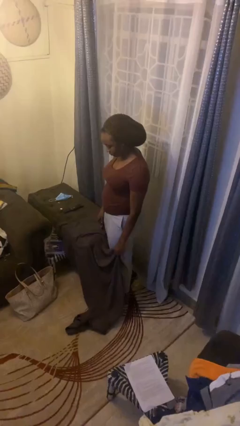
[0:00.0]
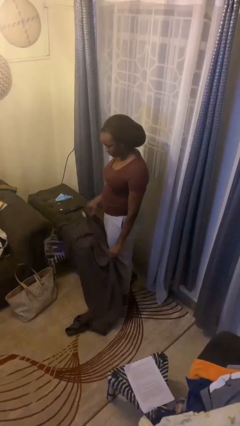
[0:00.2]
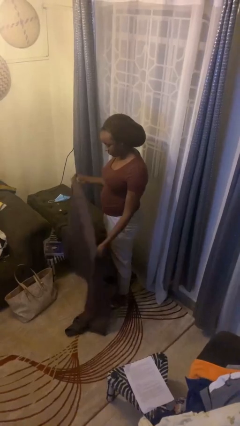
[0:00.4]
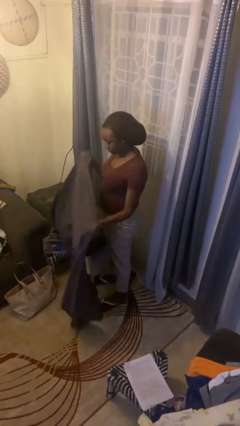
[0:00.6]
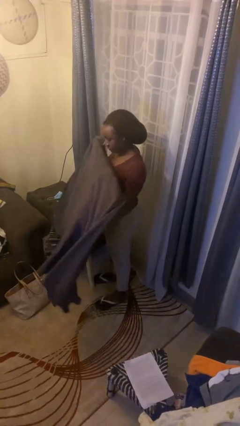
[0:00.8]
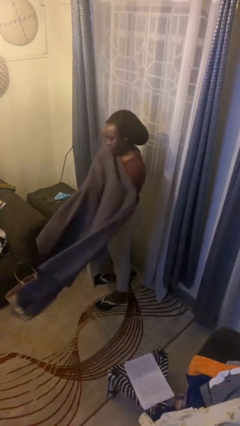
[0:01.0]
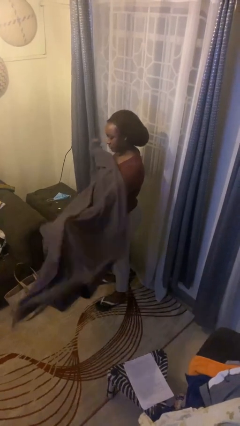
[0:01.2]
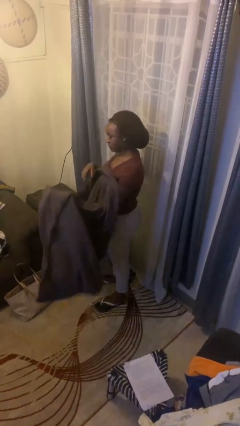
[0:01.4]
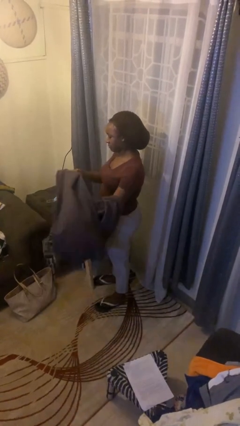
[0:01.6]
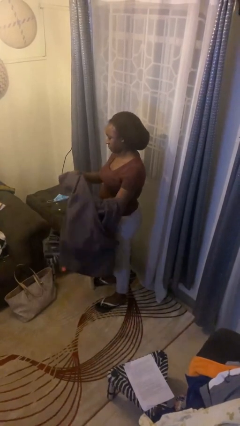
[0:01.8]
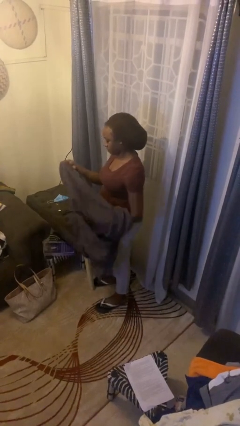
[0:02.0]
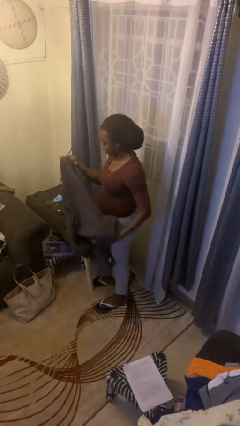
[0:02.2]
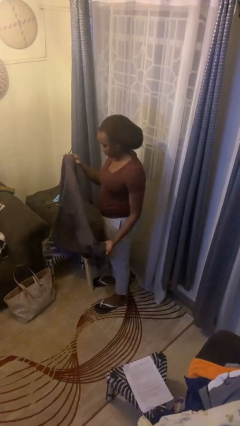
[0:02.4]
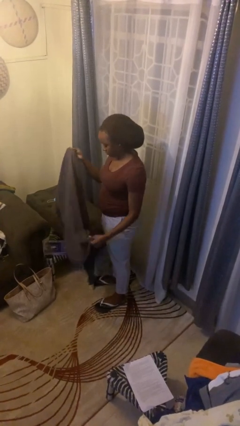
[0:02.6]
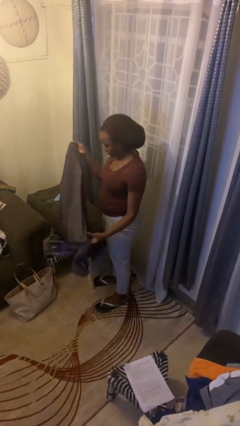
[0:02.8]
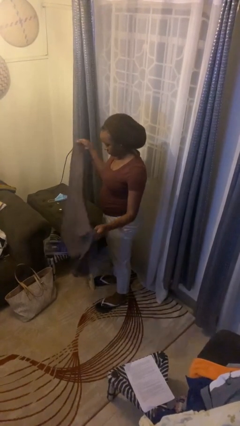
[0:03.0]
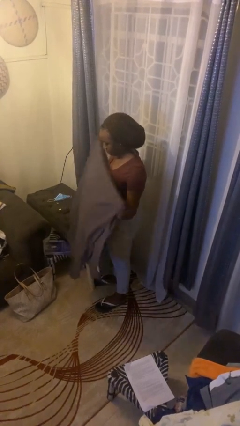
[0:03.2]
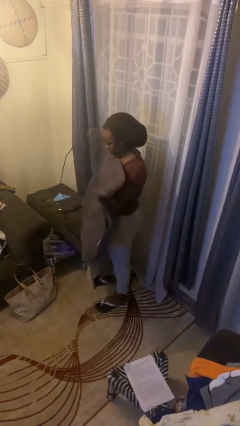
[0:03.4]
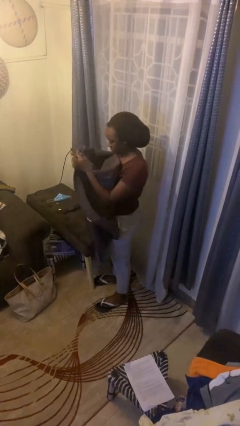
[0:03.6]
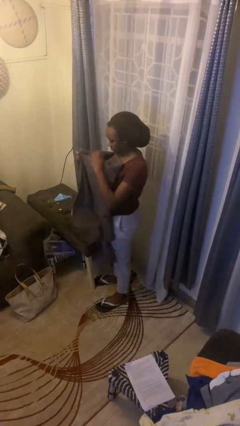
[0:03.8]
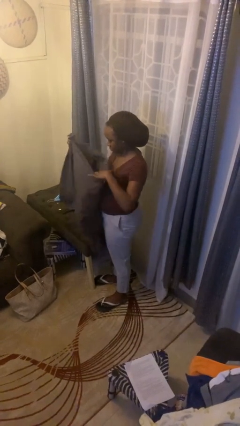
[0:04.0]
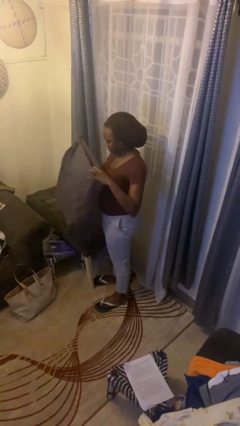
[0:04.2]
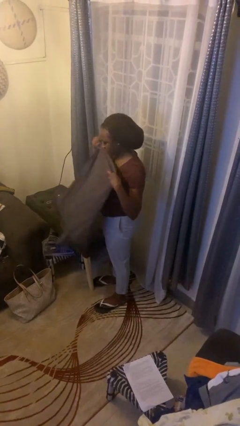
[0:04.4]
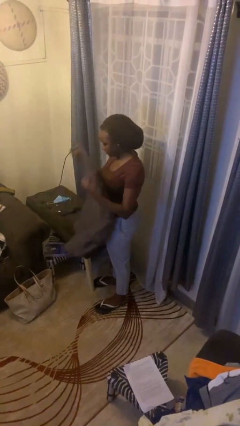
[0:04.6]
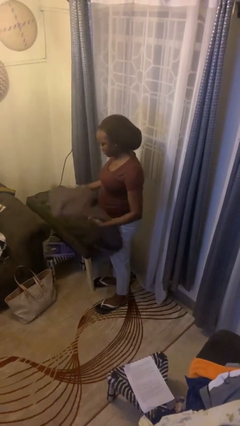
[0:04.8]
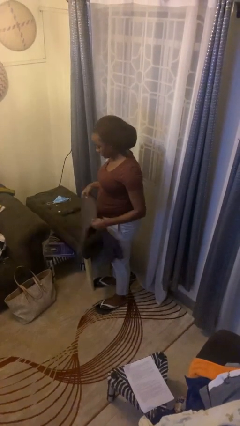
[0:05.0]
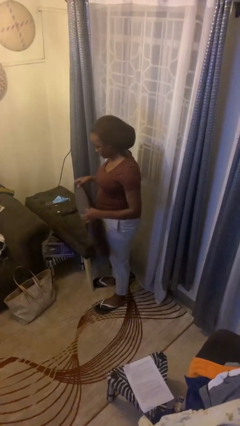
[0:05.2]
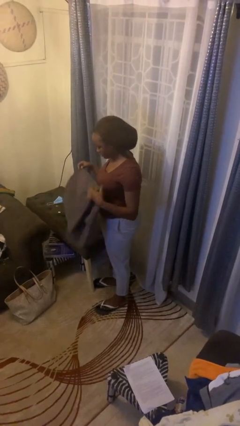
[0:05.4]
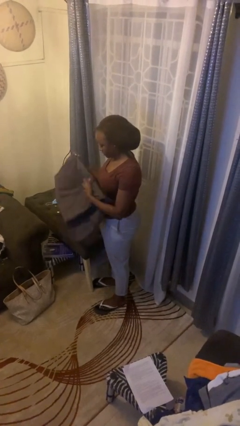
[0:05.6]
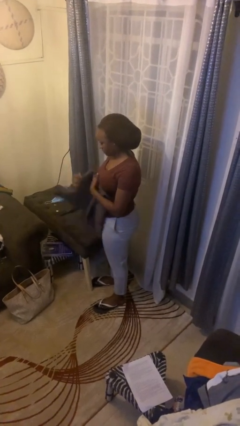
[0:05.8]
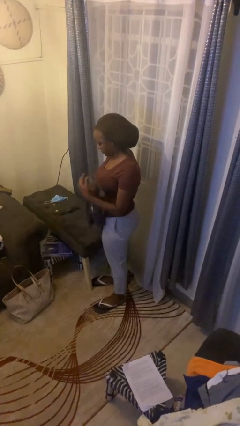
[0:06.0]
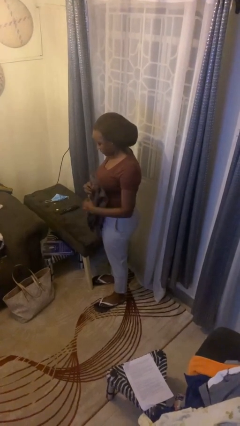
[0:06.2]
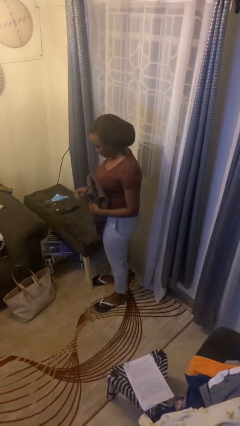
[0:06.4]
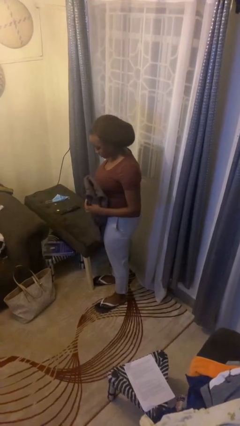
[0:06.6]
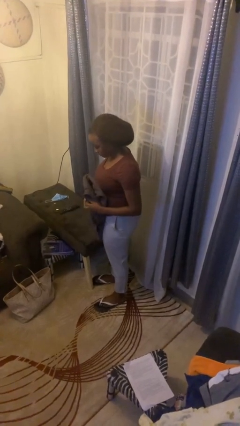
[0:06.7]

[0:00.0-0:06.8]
person folds blanket

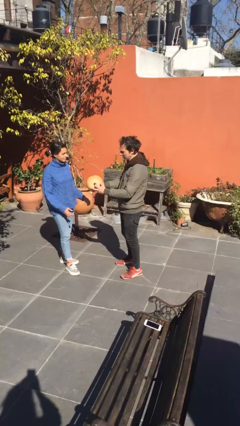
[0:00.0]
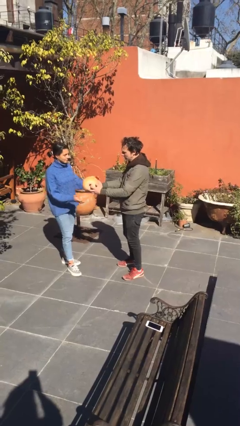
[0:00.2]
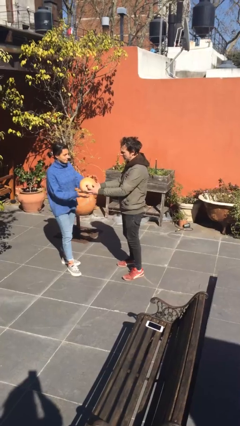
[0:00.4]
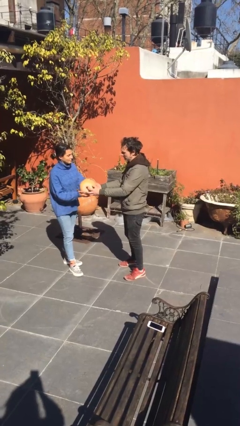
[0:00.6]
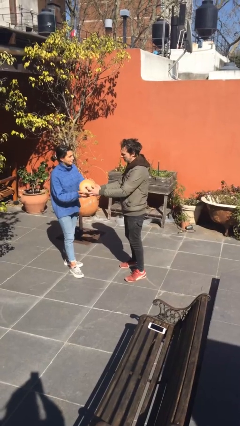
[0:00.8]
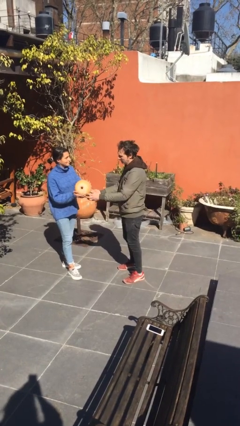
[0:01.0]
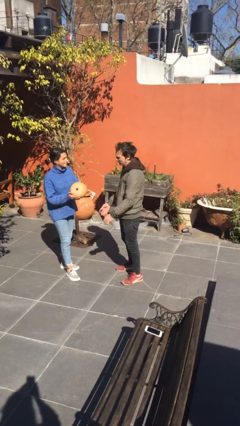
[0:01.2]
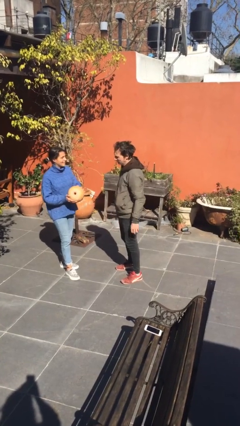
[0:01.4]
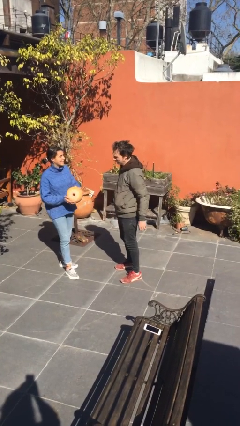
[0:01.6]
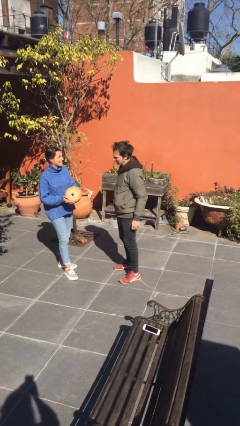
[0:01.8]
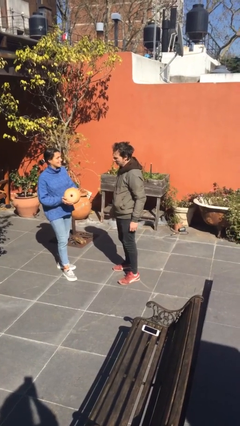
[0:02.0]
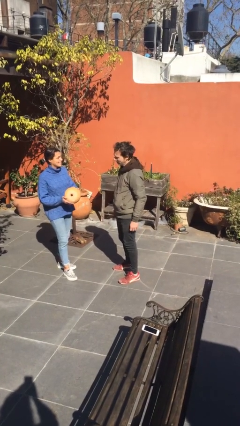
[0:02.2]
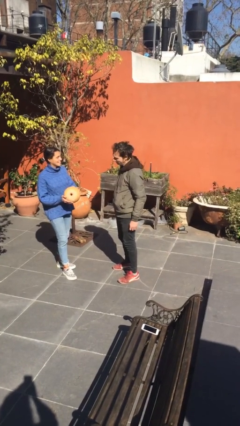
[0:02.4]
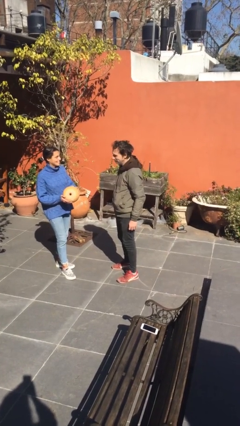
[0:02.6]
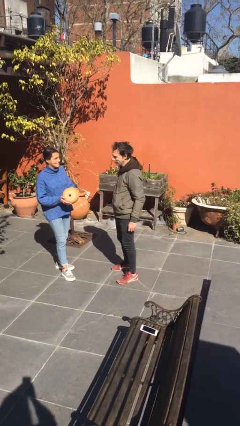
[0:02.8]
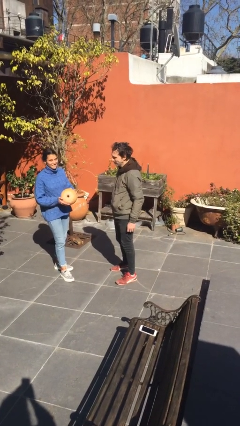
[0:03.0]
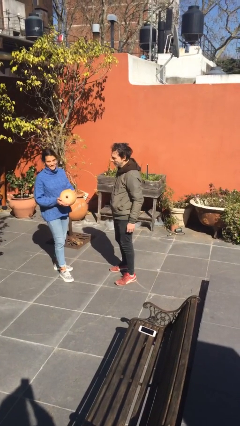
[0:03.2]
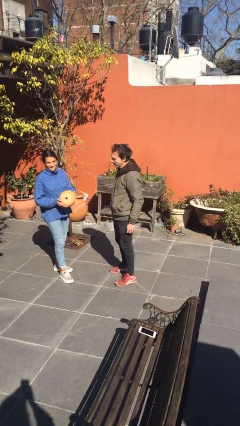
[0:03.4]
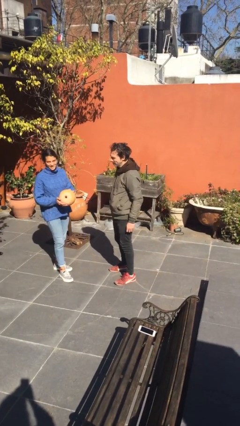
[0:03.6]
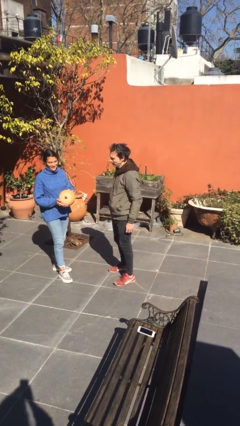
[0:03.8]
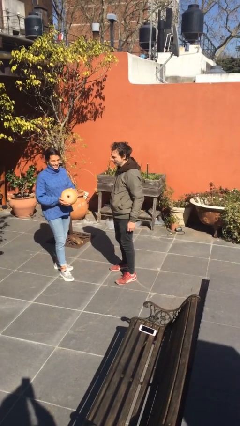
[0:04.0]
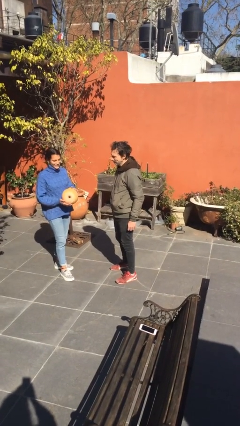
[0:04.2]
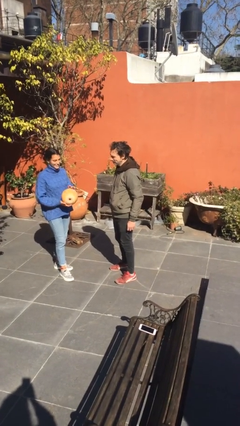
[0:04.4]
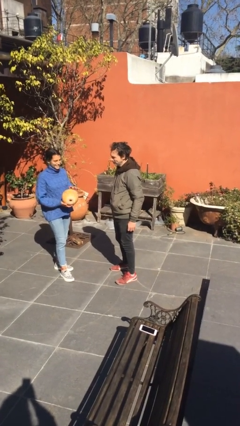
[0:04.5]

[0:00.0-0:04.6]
person transfers object to person

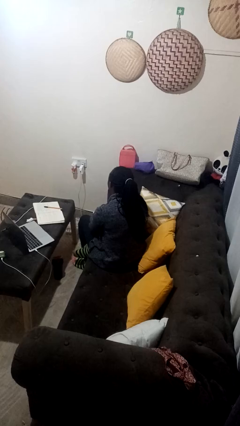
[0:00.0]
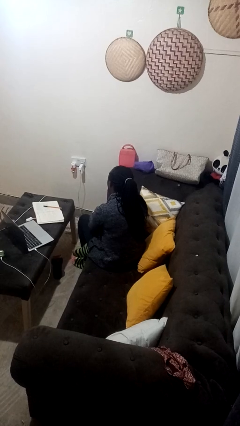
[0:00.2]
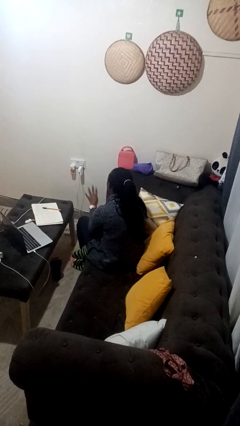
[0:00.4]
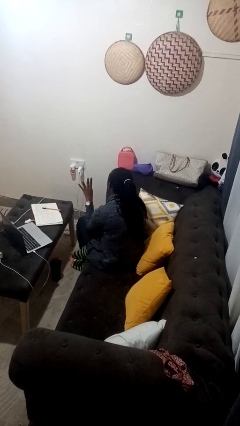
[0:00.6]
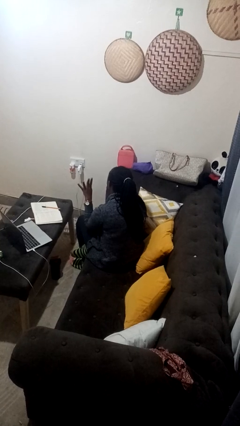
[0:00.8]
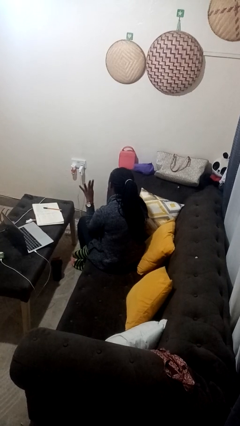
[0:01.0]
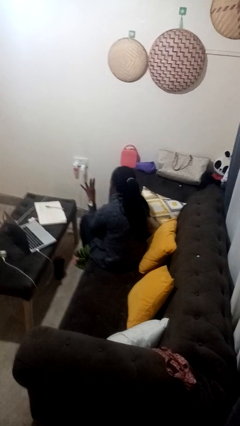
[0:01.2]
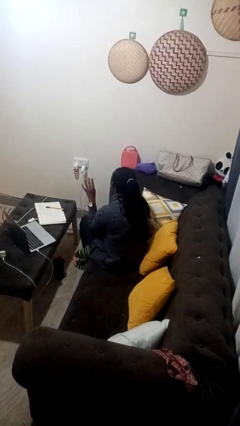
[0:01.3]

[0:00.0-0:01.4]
person gestures number four

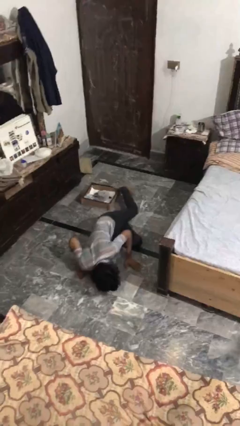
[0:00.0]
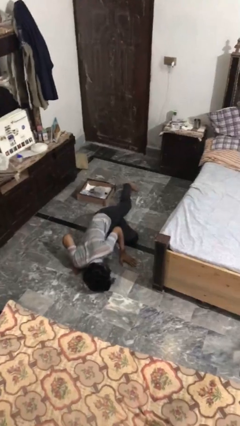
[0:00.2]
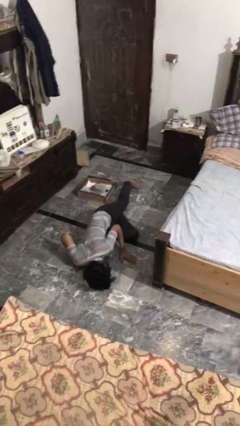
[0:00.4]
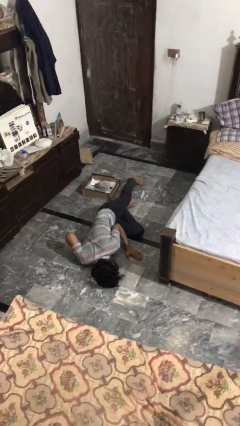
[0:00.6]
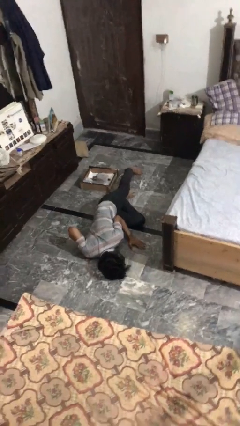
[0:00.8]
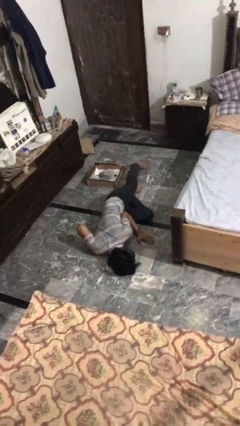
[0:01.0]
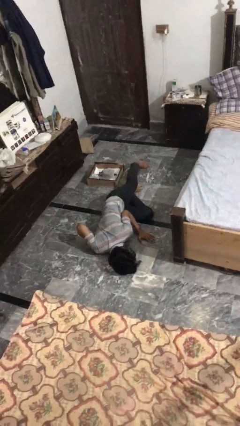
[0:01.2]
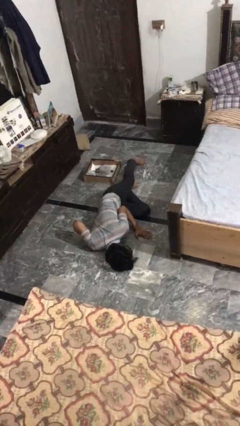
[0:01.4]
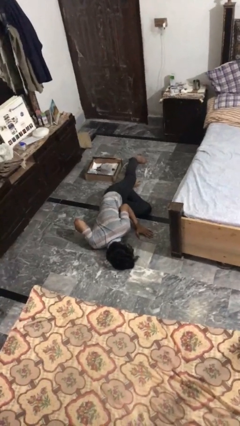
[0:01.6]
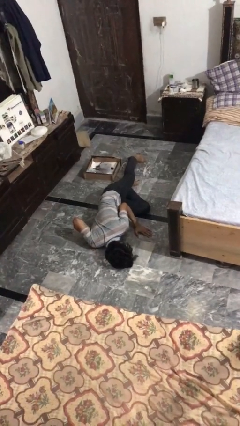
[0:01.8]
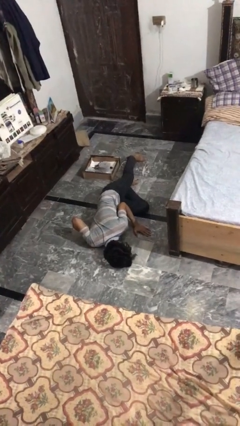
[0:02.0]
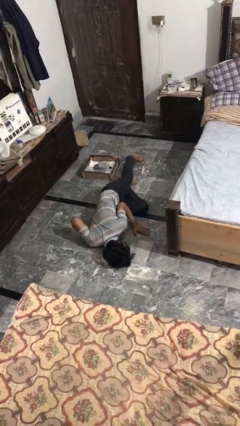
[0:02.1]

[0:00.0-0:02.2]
person lies down on floor

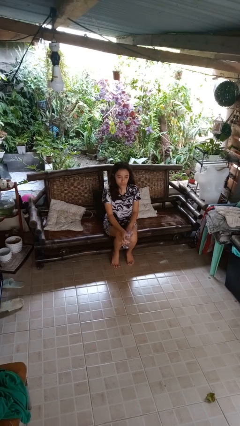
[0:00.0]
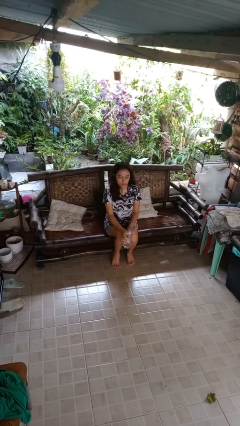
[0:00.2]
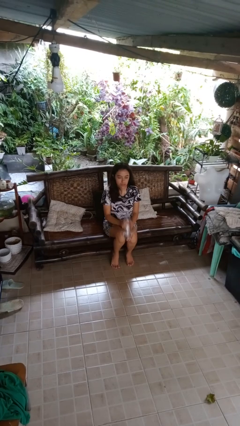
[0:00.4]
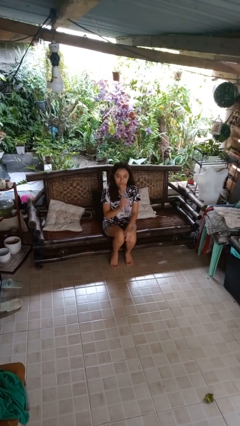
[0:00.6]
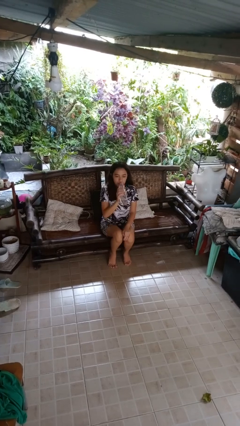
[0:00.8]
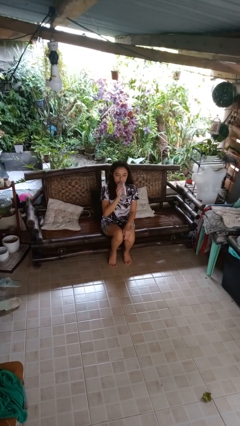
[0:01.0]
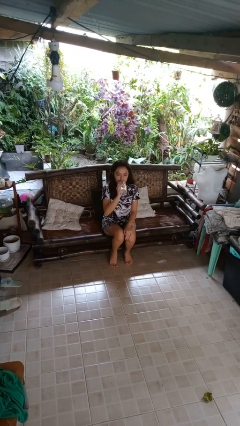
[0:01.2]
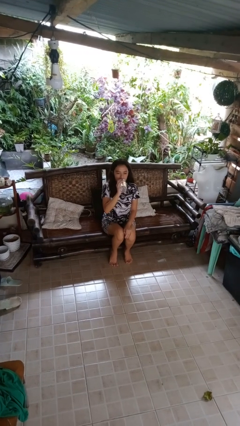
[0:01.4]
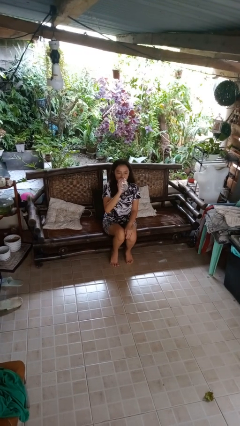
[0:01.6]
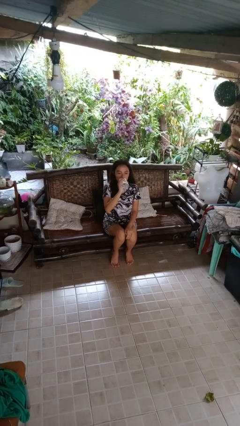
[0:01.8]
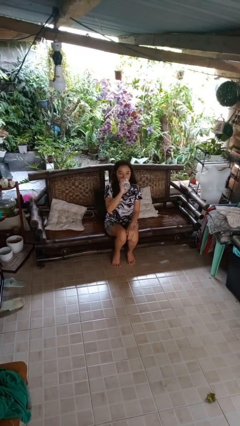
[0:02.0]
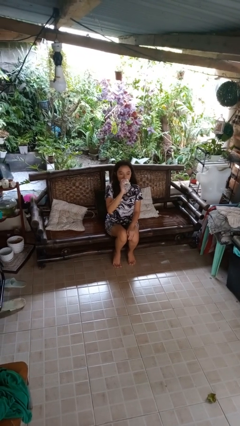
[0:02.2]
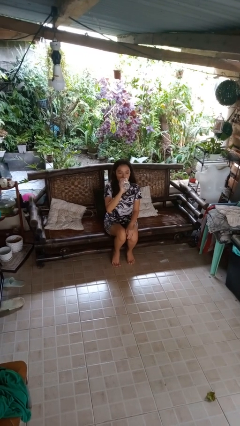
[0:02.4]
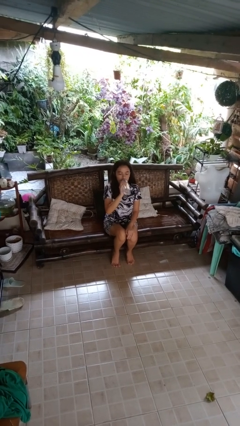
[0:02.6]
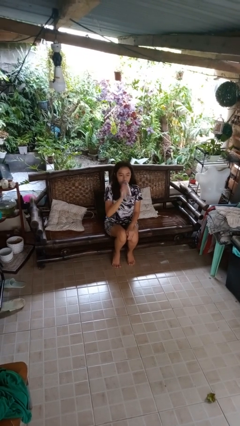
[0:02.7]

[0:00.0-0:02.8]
person drinks from bottle
